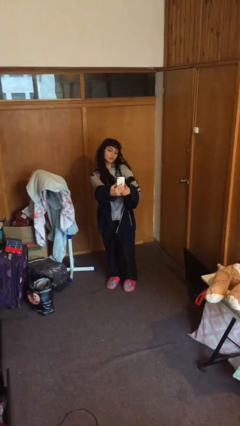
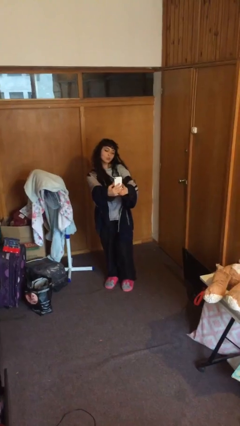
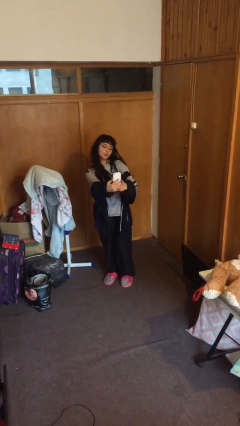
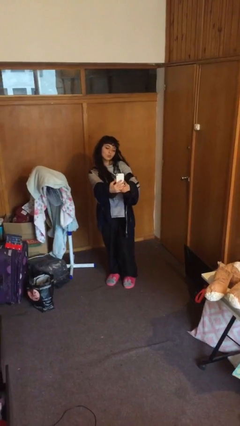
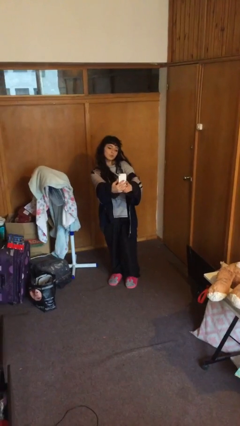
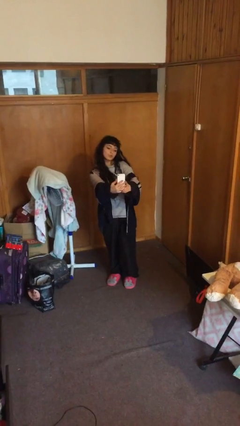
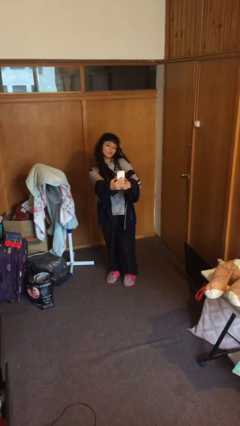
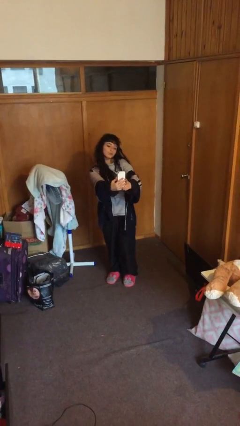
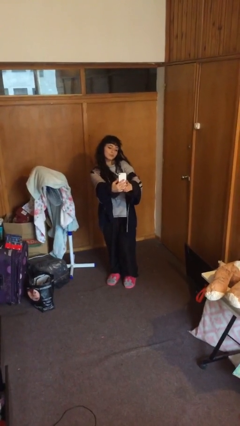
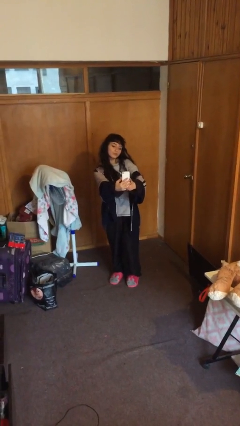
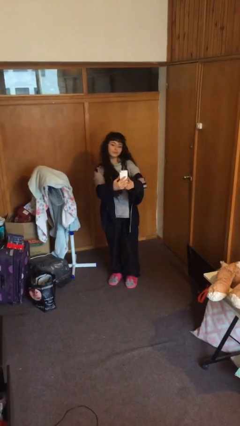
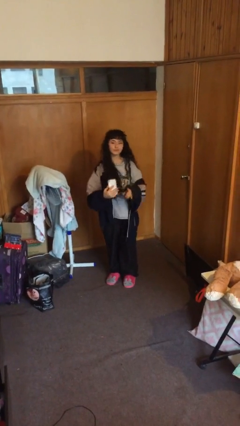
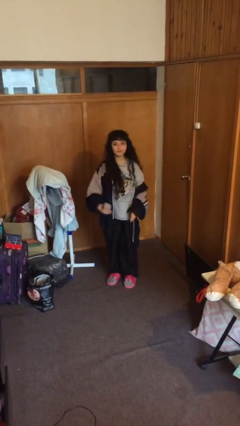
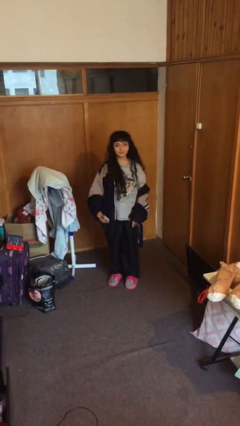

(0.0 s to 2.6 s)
person takes selfie

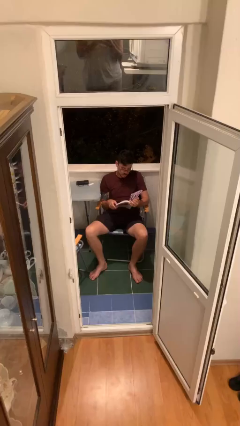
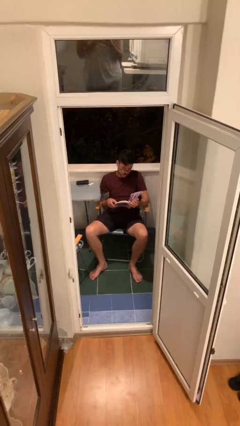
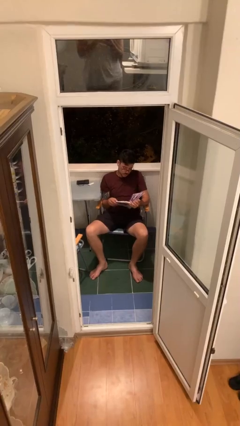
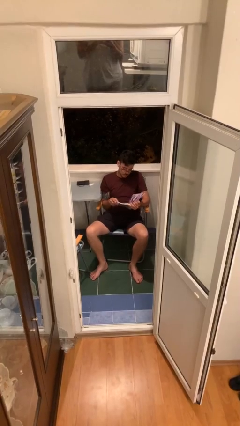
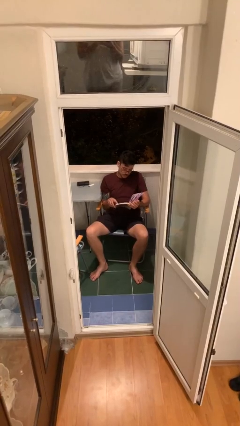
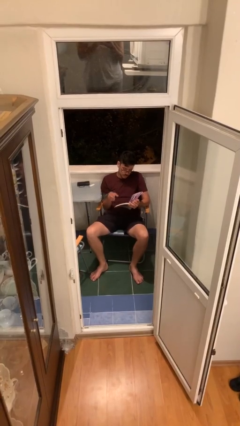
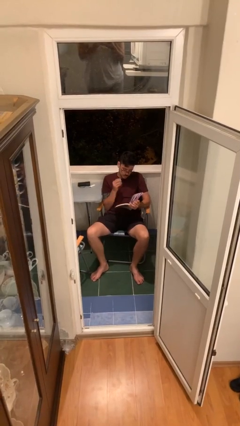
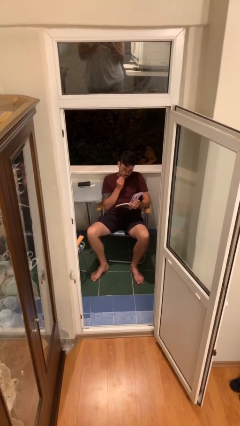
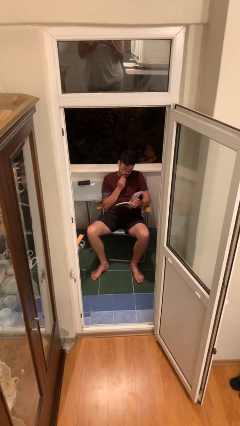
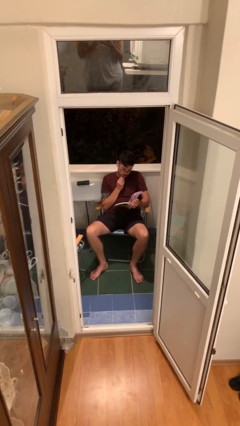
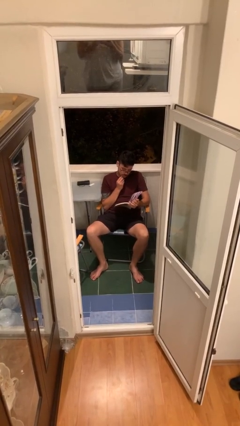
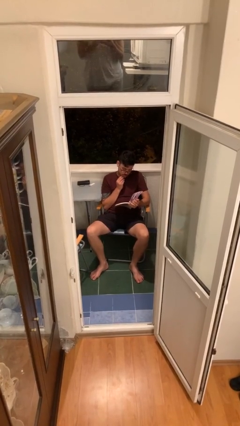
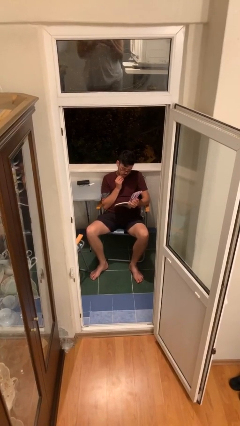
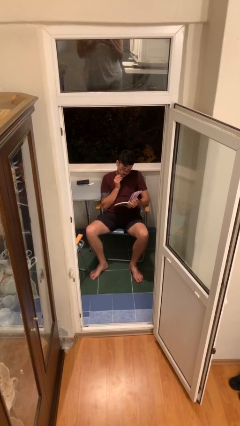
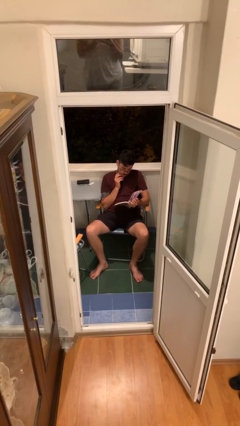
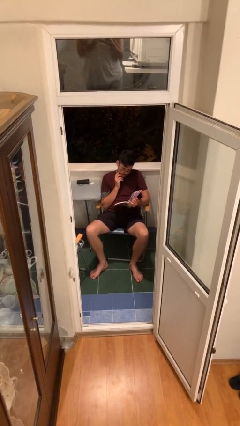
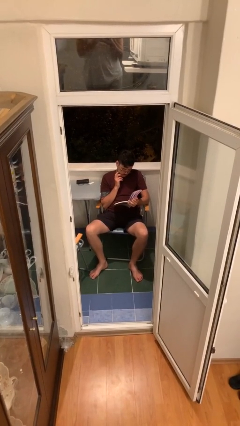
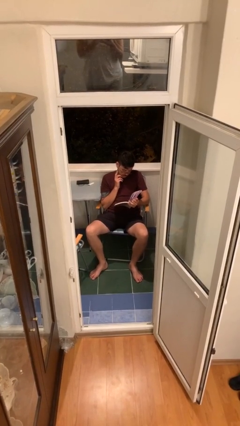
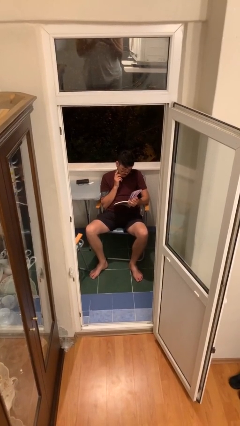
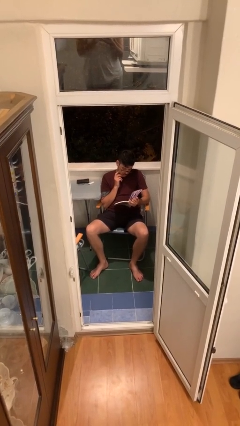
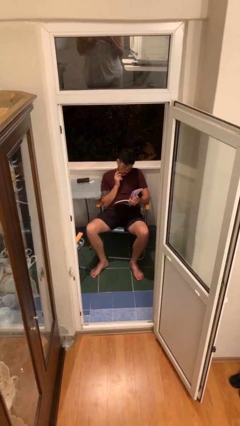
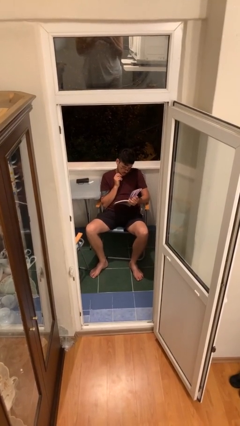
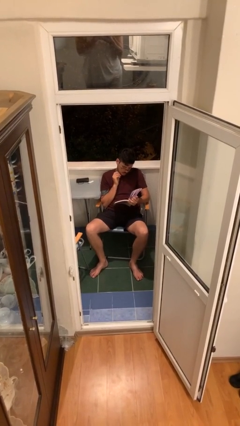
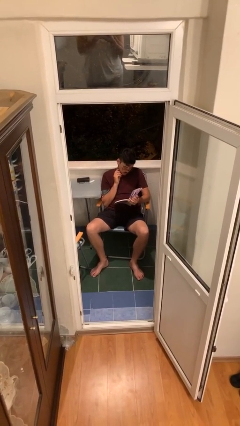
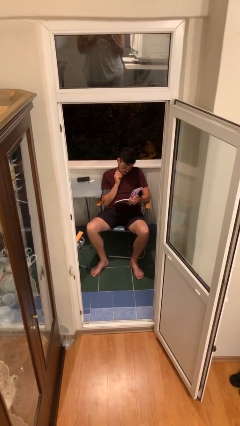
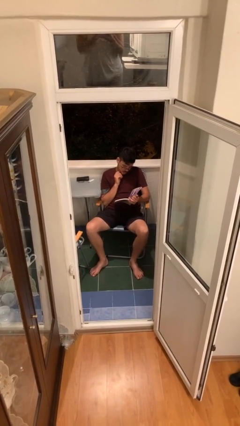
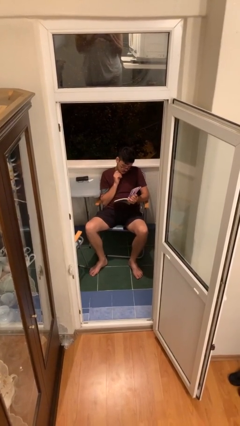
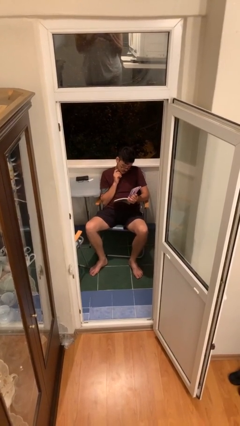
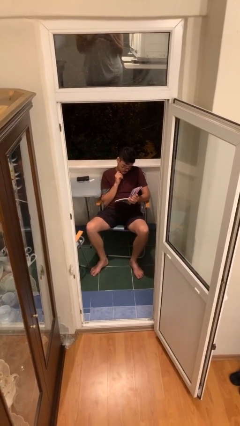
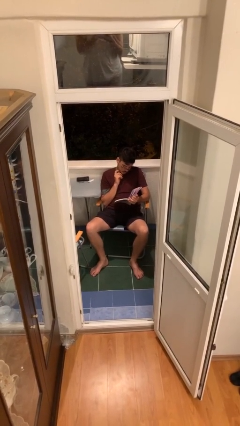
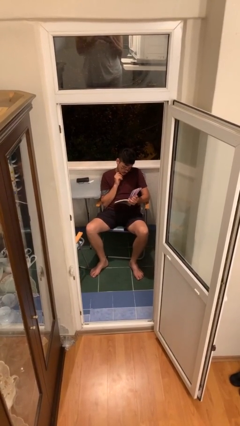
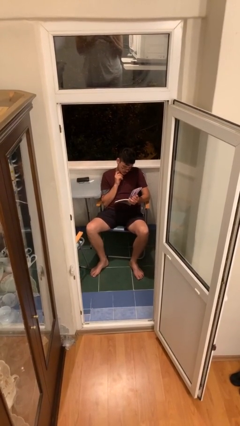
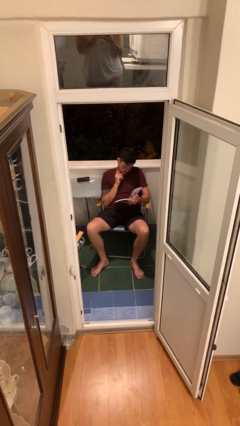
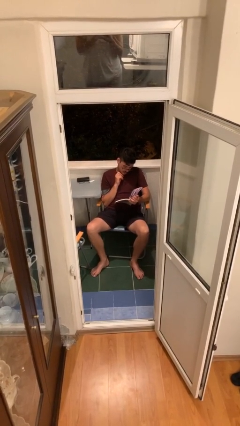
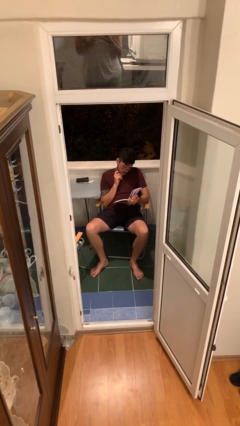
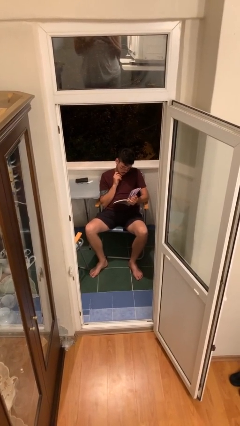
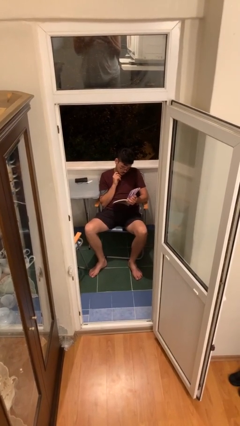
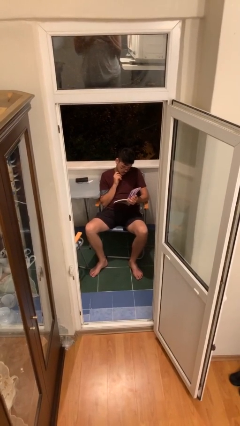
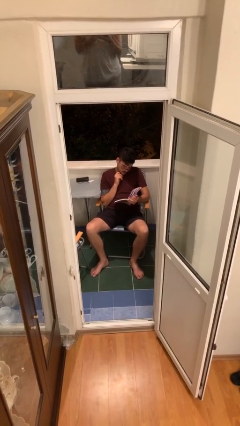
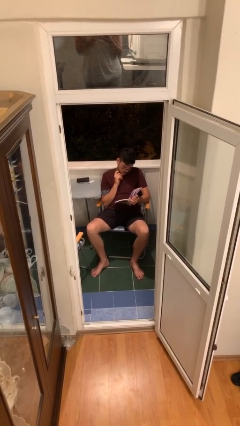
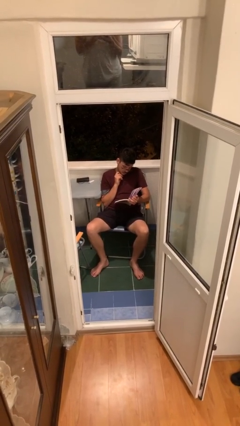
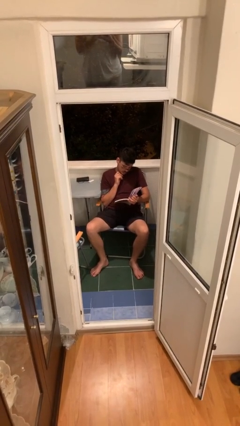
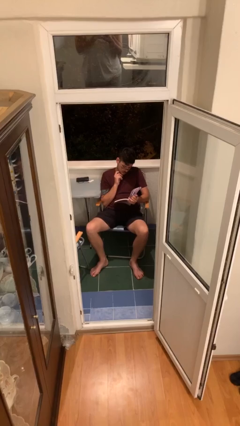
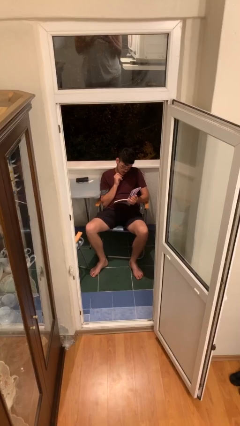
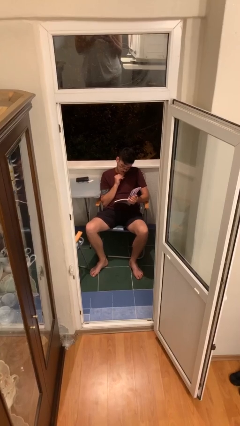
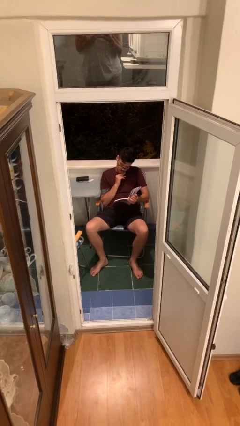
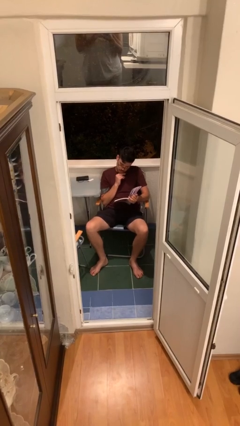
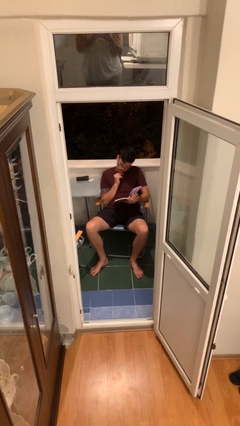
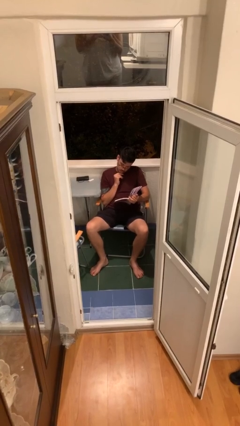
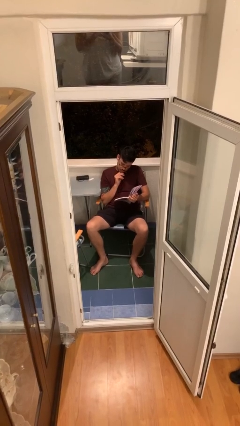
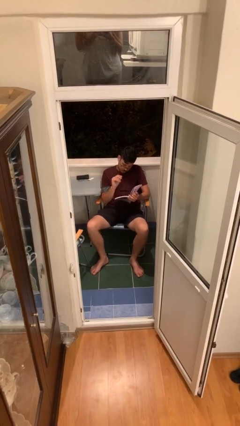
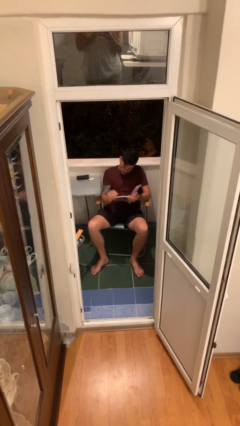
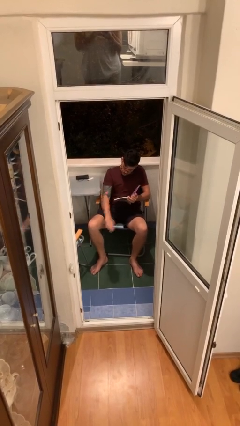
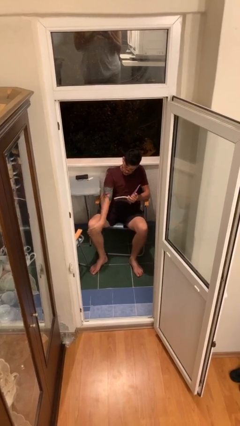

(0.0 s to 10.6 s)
person reads document

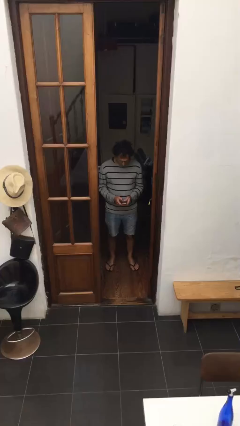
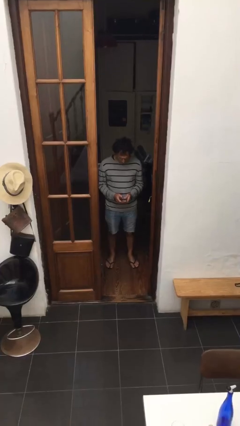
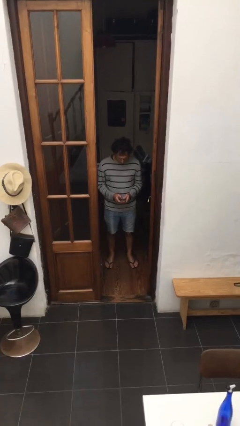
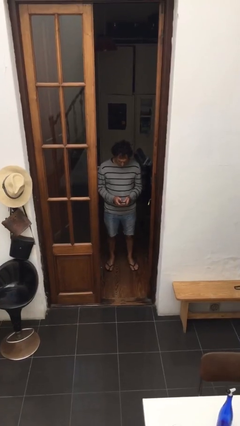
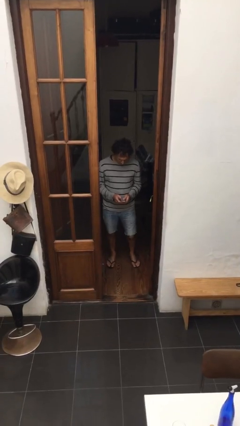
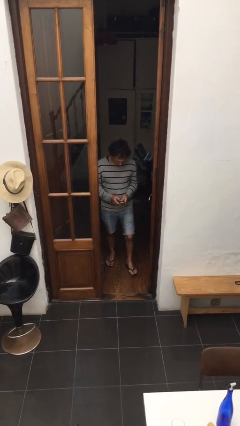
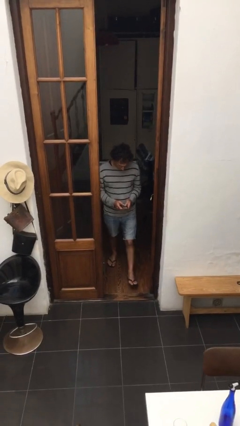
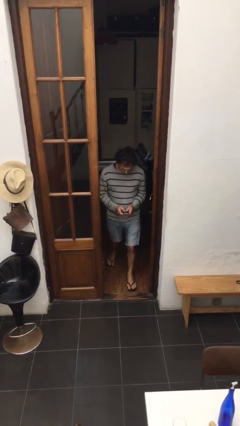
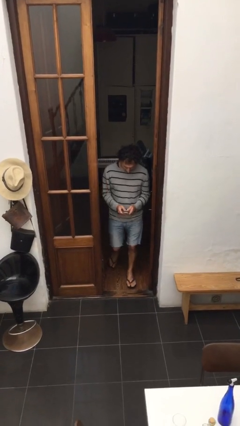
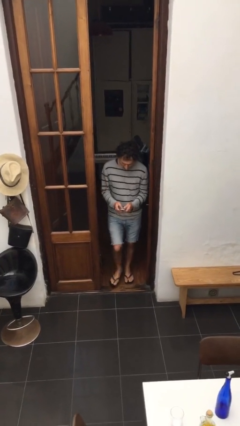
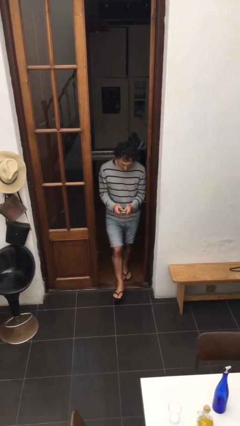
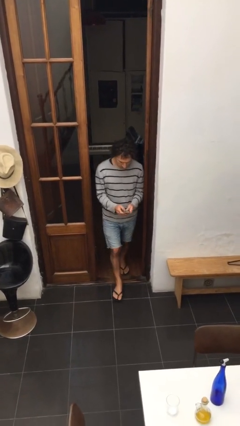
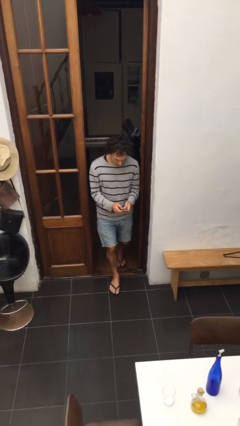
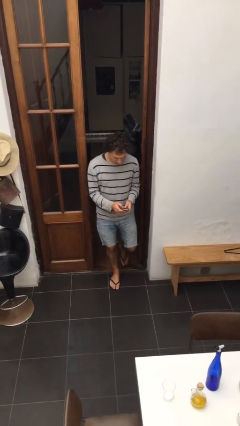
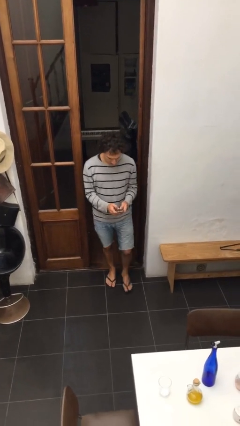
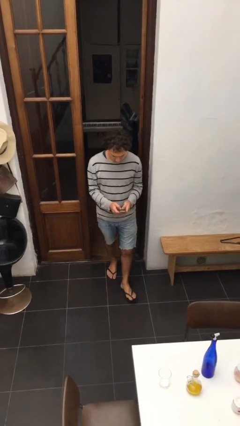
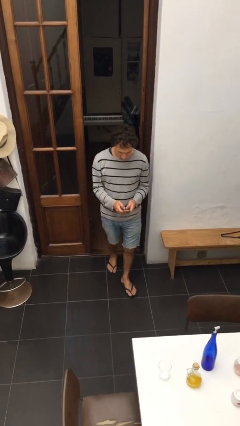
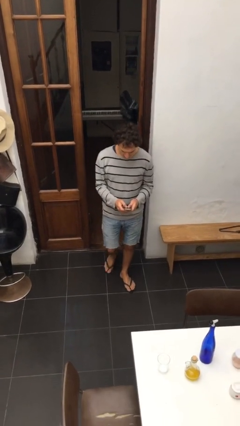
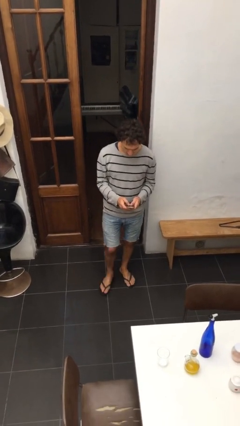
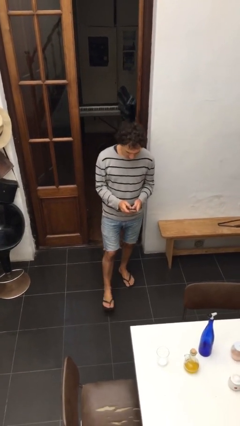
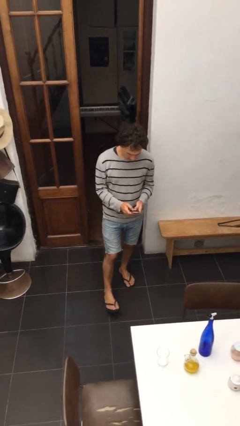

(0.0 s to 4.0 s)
person enters scene through structure

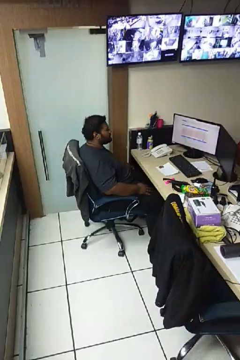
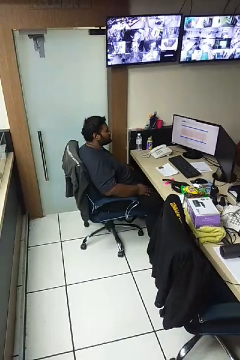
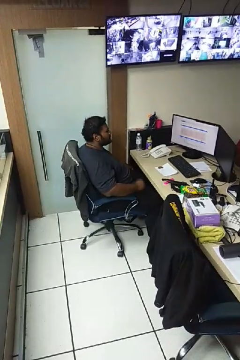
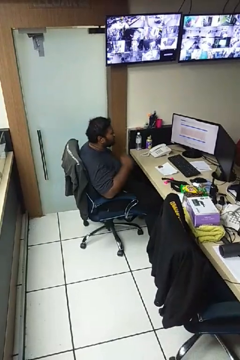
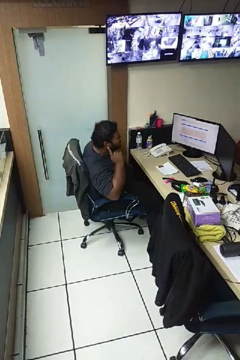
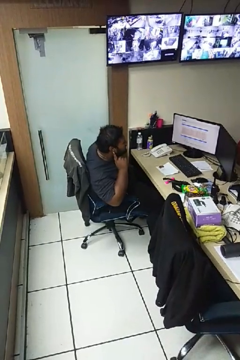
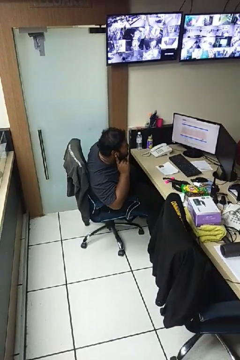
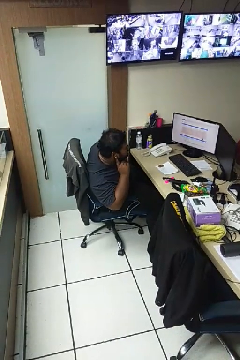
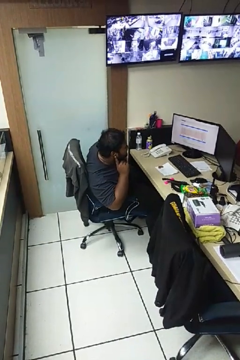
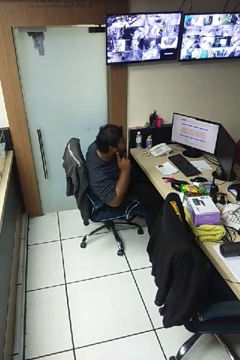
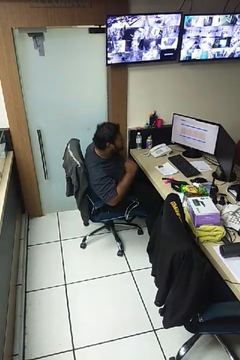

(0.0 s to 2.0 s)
person gestures listen closely
